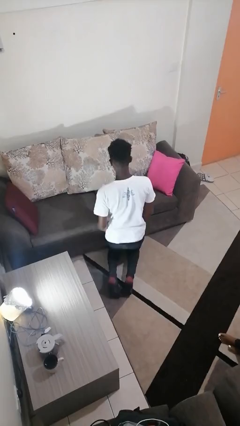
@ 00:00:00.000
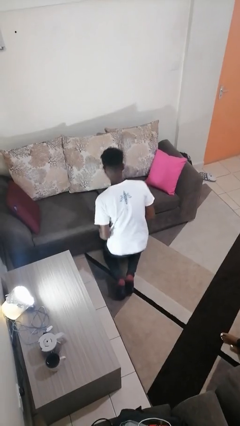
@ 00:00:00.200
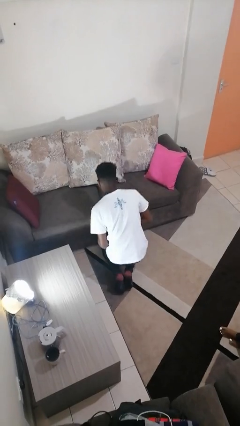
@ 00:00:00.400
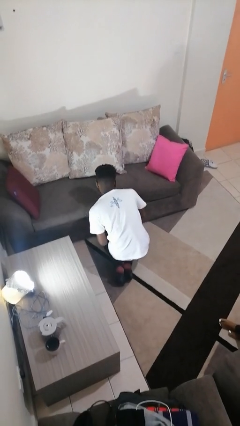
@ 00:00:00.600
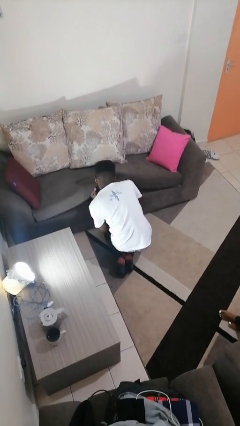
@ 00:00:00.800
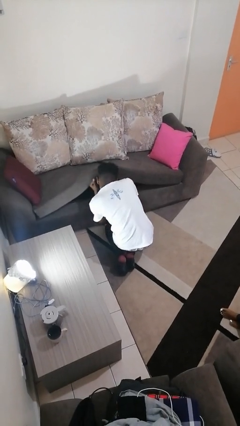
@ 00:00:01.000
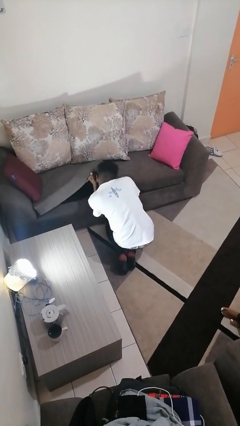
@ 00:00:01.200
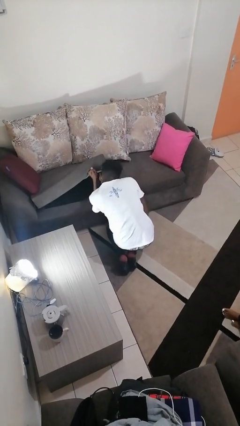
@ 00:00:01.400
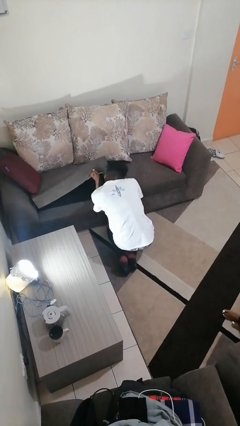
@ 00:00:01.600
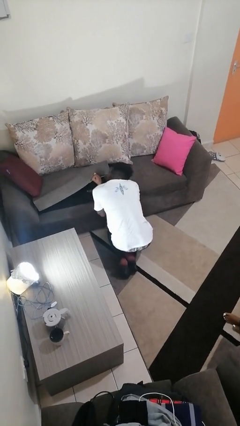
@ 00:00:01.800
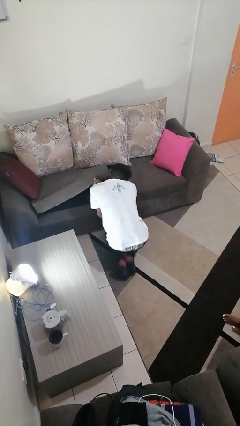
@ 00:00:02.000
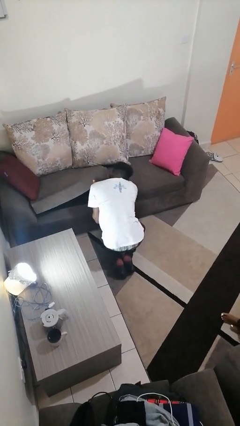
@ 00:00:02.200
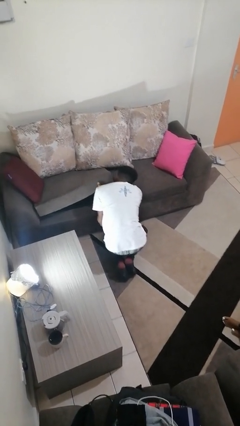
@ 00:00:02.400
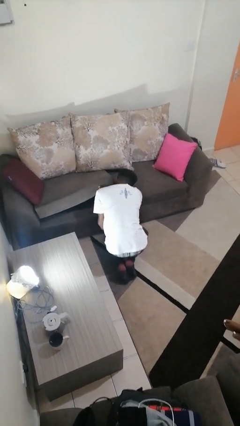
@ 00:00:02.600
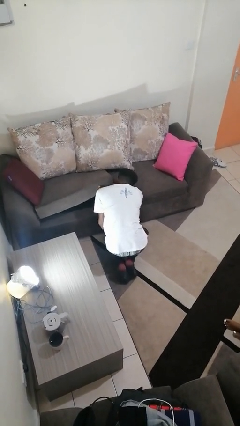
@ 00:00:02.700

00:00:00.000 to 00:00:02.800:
person searches under couch

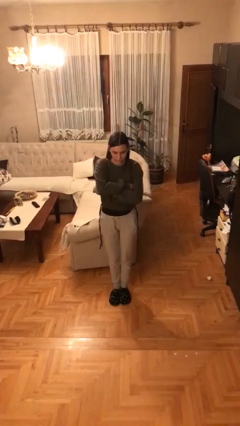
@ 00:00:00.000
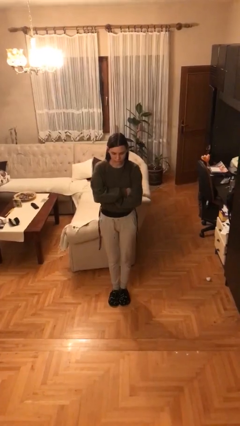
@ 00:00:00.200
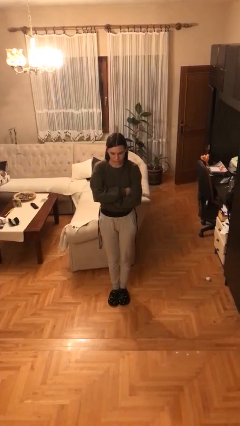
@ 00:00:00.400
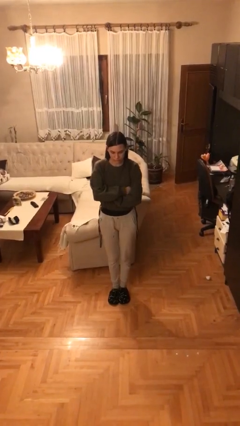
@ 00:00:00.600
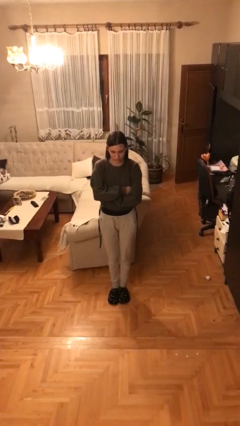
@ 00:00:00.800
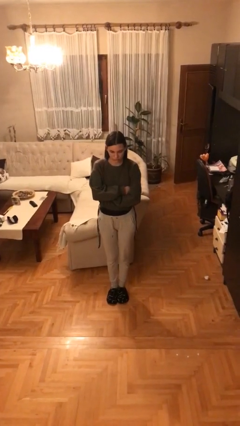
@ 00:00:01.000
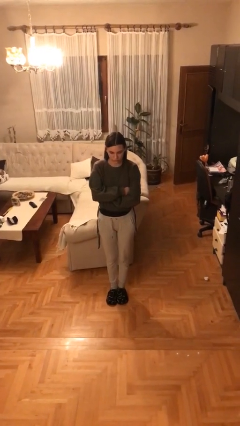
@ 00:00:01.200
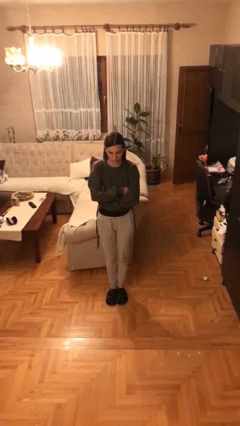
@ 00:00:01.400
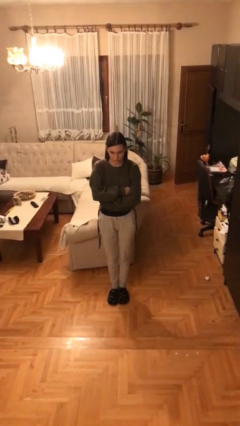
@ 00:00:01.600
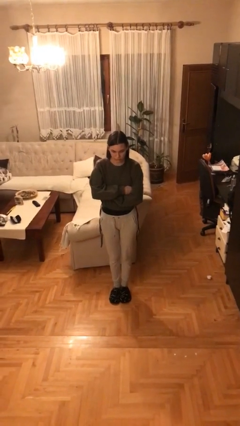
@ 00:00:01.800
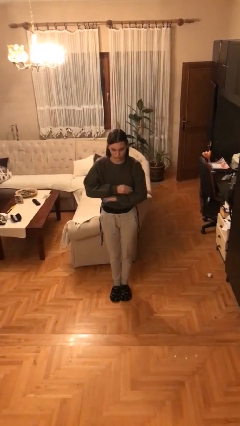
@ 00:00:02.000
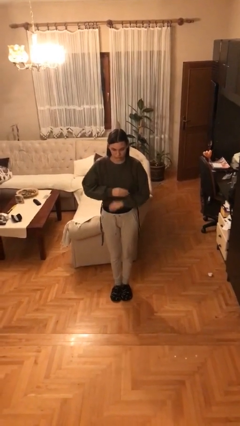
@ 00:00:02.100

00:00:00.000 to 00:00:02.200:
person crosses arms

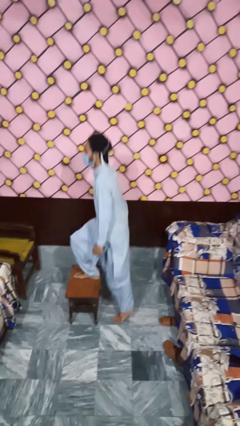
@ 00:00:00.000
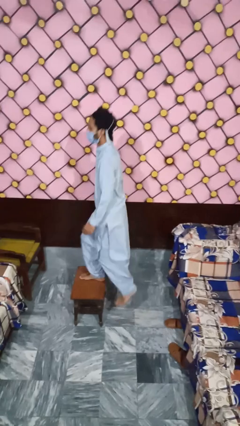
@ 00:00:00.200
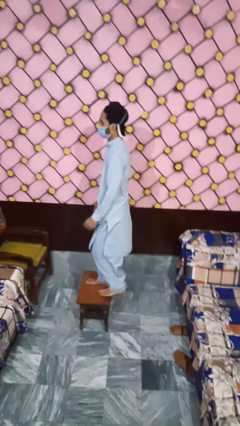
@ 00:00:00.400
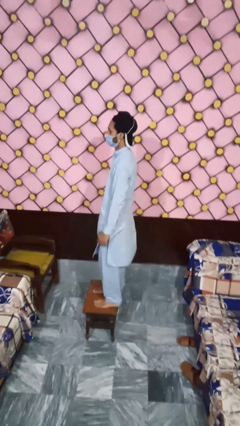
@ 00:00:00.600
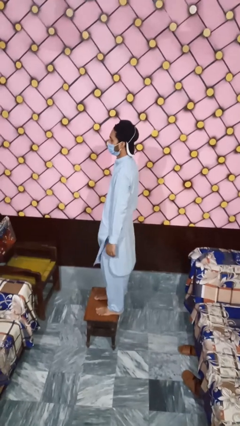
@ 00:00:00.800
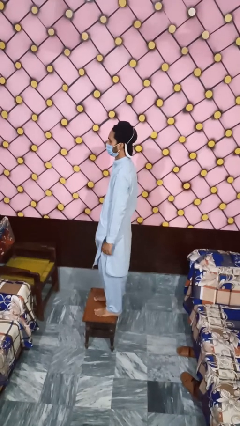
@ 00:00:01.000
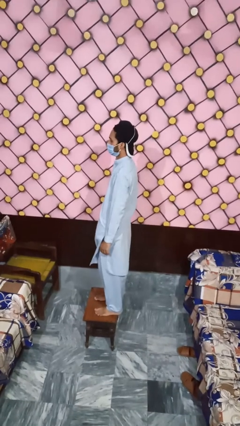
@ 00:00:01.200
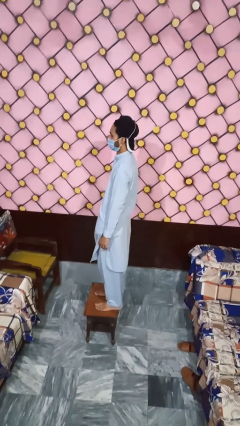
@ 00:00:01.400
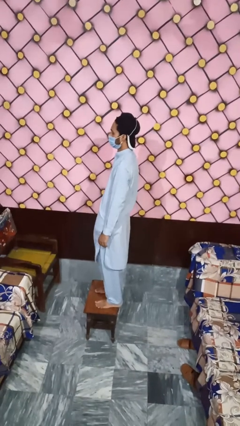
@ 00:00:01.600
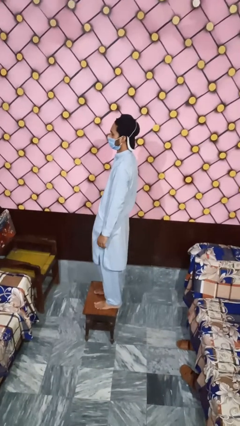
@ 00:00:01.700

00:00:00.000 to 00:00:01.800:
person climbs on table

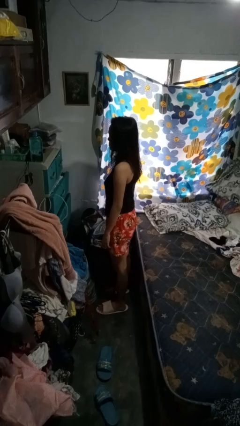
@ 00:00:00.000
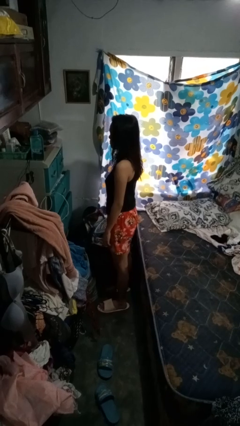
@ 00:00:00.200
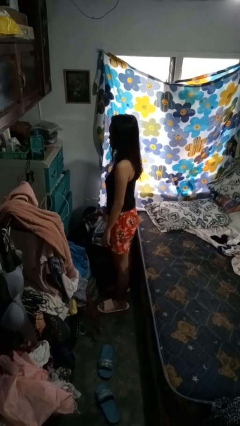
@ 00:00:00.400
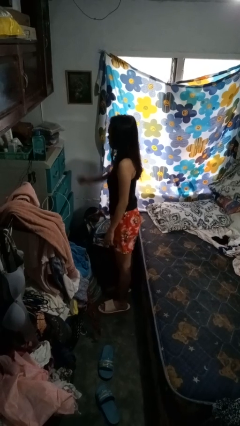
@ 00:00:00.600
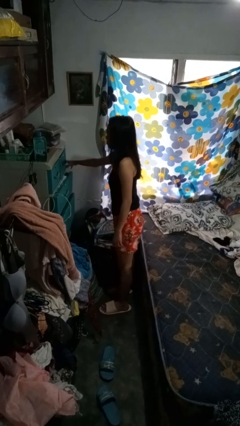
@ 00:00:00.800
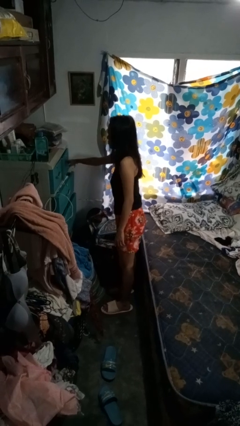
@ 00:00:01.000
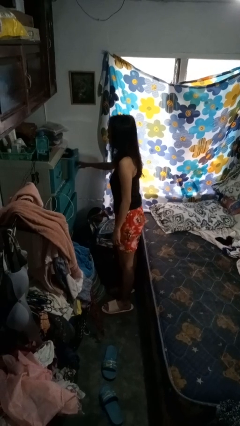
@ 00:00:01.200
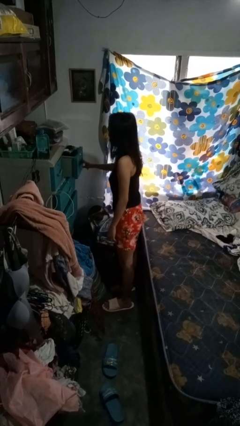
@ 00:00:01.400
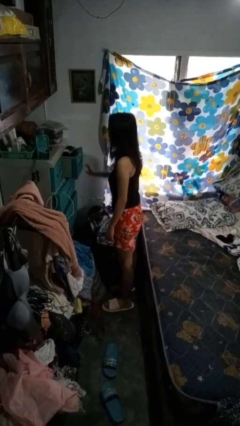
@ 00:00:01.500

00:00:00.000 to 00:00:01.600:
person opens dresser drawer

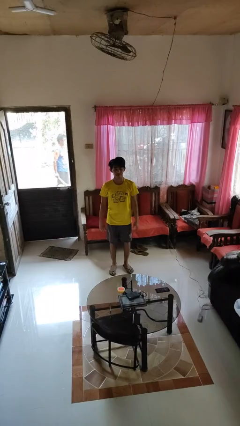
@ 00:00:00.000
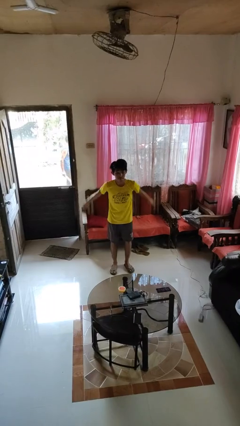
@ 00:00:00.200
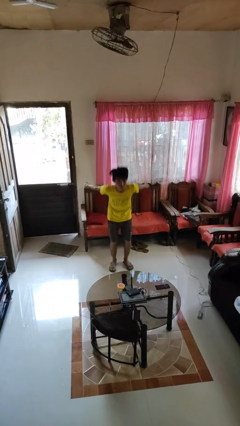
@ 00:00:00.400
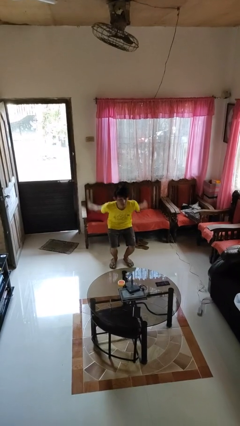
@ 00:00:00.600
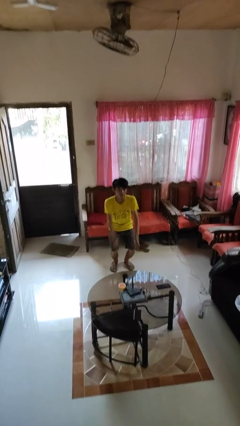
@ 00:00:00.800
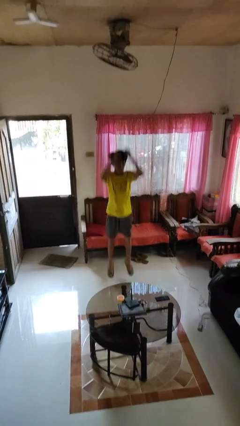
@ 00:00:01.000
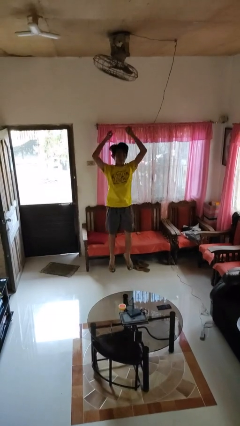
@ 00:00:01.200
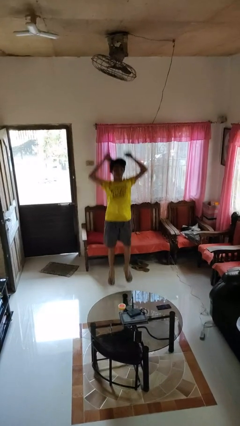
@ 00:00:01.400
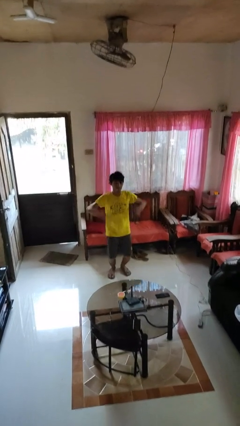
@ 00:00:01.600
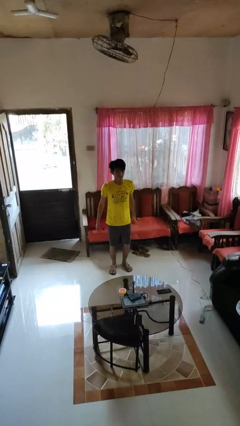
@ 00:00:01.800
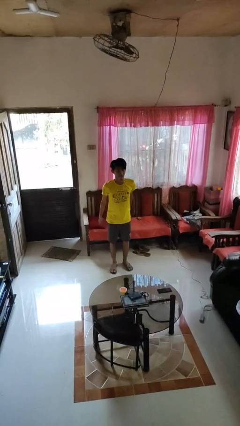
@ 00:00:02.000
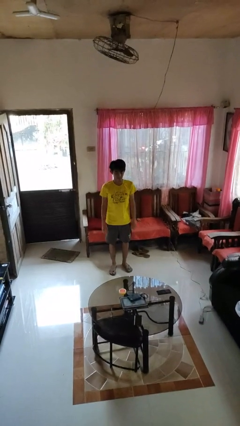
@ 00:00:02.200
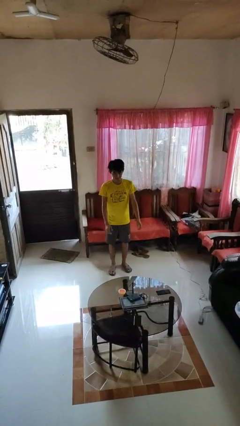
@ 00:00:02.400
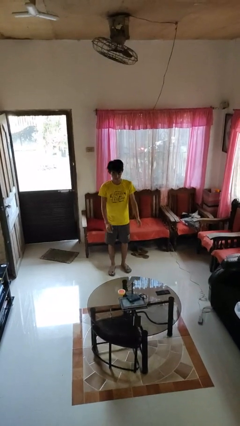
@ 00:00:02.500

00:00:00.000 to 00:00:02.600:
person jumps

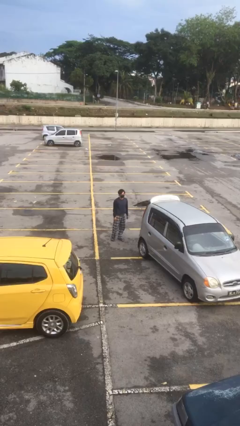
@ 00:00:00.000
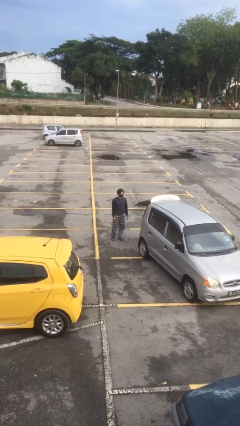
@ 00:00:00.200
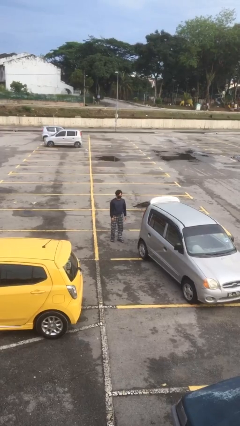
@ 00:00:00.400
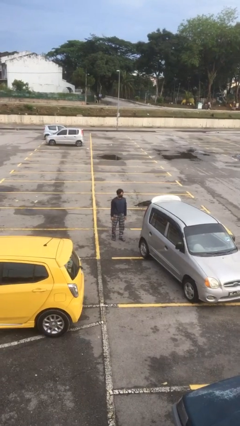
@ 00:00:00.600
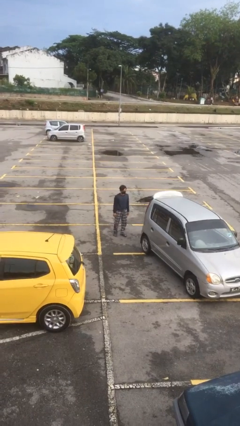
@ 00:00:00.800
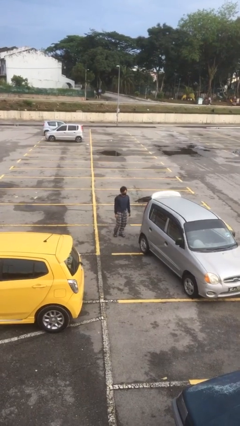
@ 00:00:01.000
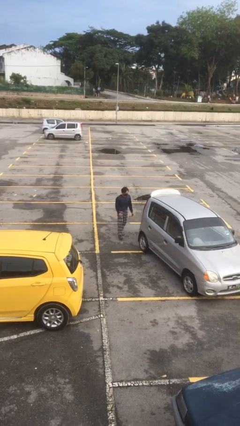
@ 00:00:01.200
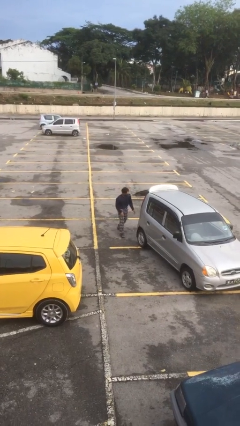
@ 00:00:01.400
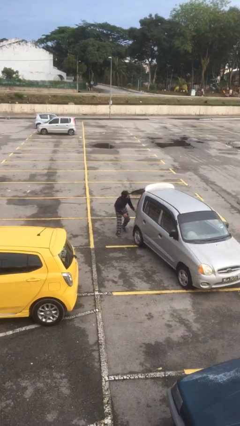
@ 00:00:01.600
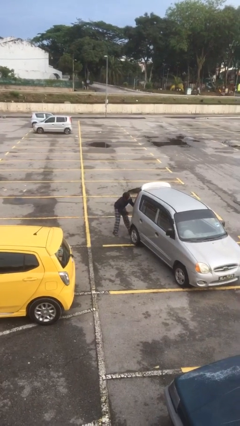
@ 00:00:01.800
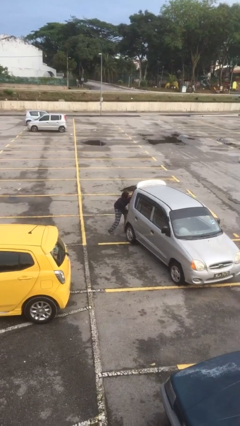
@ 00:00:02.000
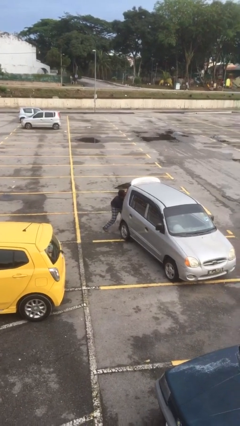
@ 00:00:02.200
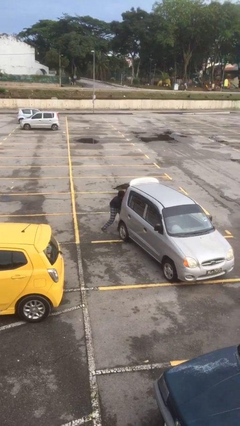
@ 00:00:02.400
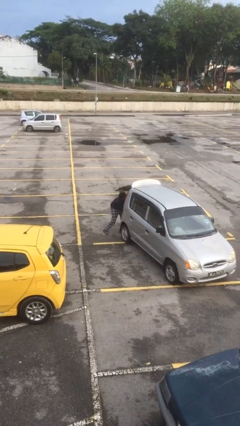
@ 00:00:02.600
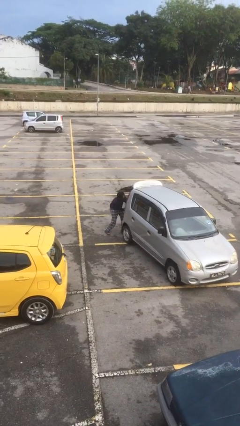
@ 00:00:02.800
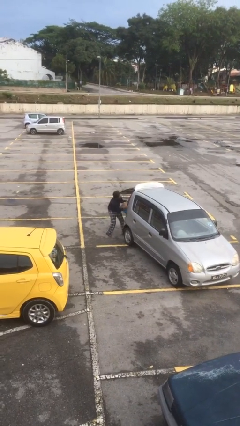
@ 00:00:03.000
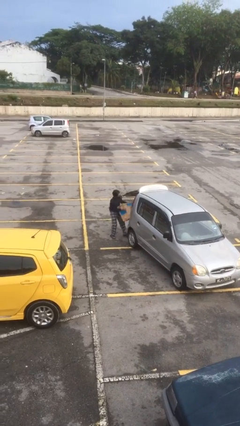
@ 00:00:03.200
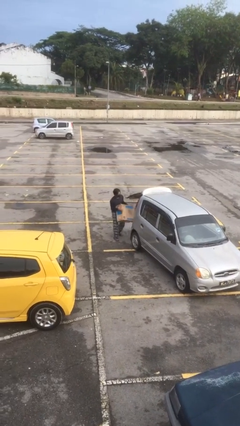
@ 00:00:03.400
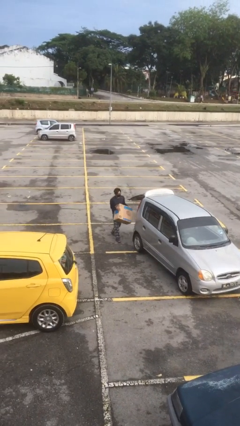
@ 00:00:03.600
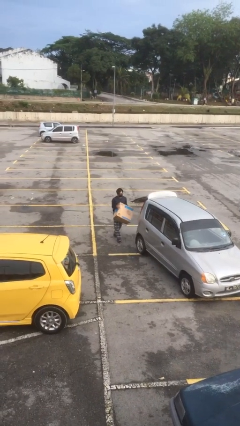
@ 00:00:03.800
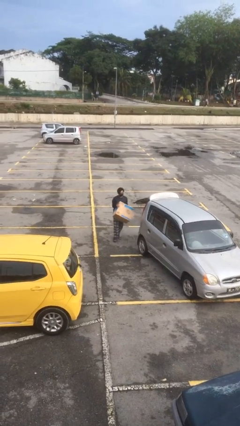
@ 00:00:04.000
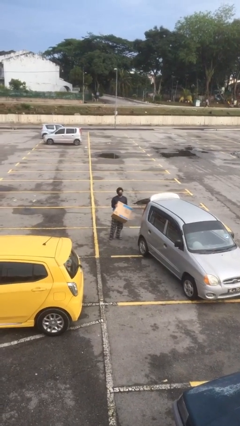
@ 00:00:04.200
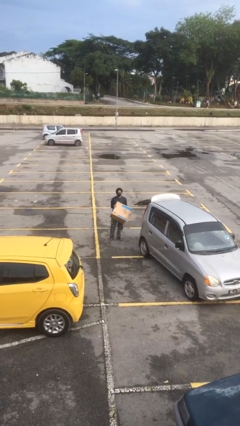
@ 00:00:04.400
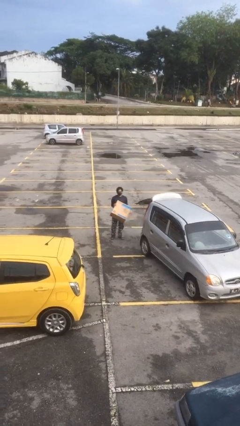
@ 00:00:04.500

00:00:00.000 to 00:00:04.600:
person unloads car

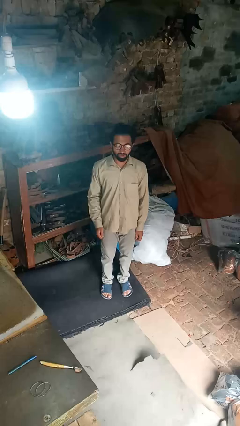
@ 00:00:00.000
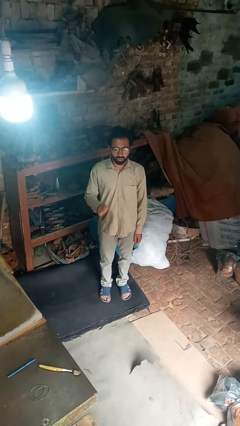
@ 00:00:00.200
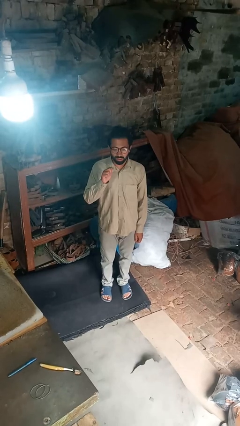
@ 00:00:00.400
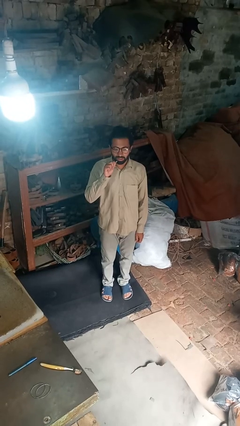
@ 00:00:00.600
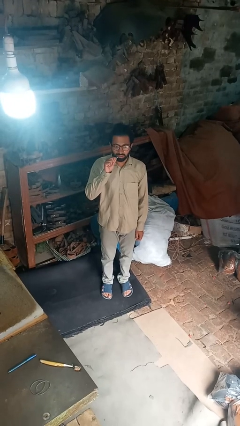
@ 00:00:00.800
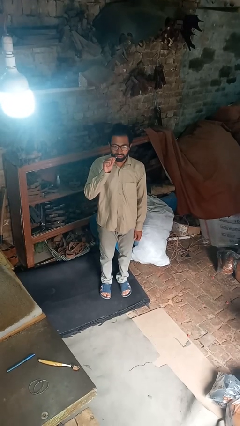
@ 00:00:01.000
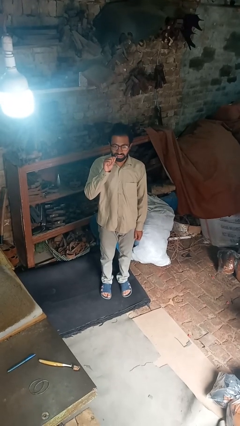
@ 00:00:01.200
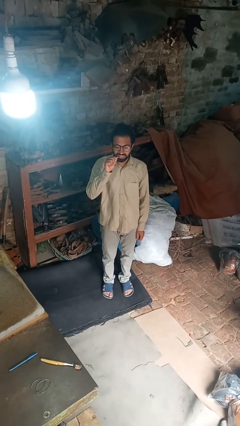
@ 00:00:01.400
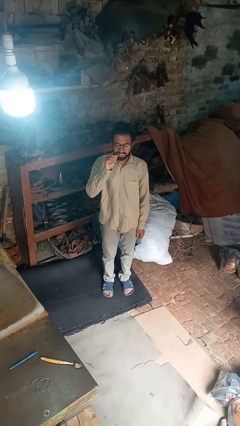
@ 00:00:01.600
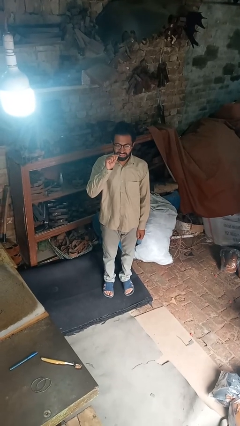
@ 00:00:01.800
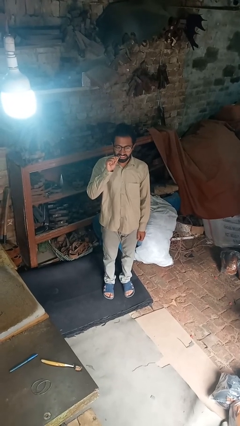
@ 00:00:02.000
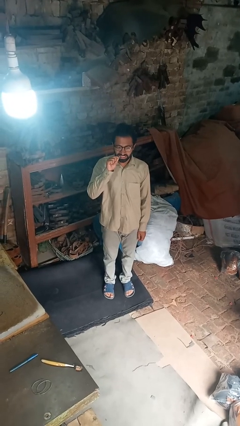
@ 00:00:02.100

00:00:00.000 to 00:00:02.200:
person flosses
